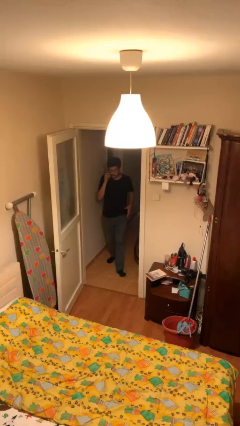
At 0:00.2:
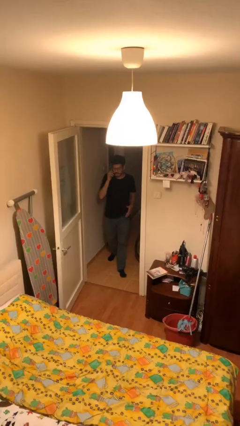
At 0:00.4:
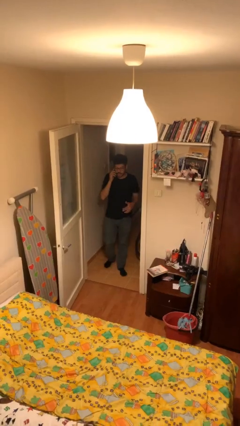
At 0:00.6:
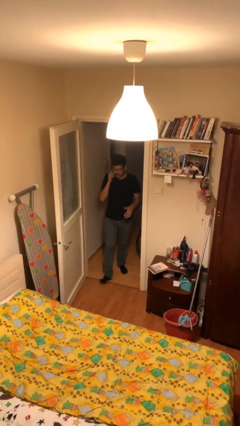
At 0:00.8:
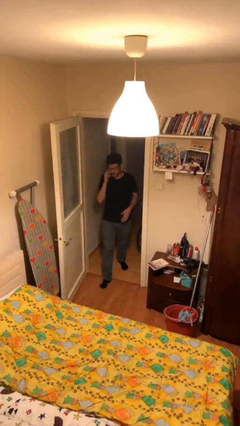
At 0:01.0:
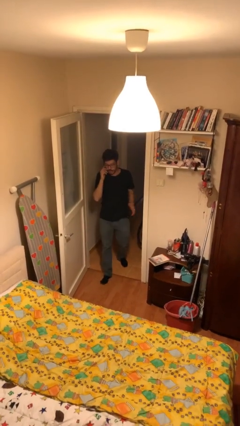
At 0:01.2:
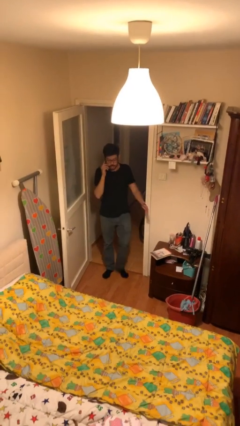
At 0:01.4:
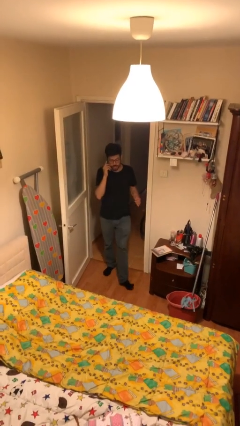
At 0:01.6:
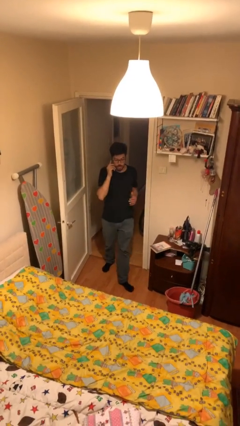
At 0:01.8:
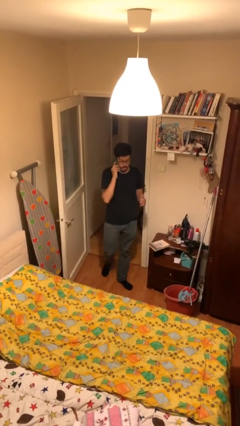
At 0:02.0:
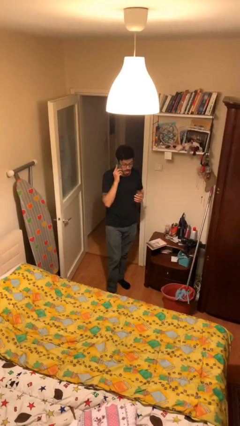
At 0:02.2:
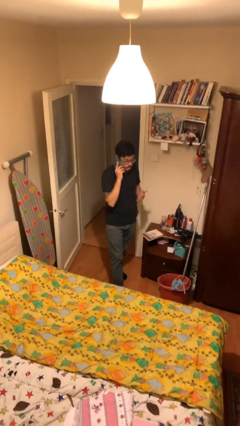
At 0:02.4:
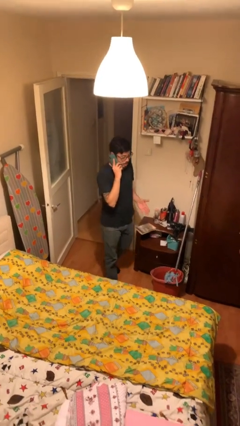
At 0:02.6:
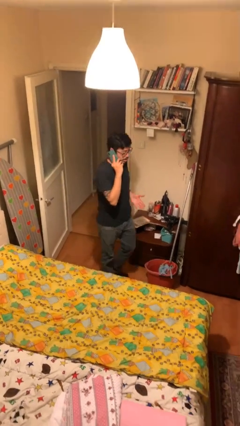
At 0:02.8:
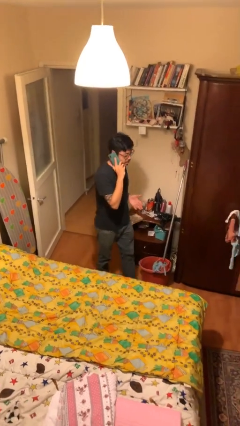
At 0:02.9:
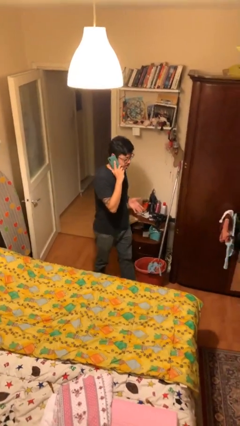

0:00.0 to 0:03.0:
person enters scene through structure

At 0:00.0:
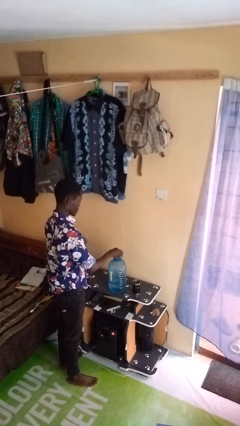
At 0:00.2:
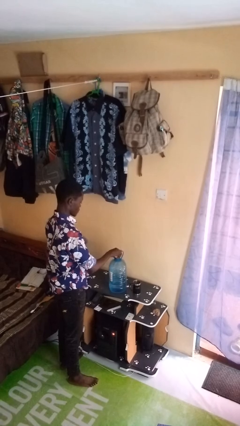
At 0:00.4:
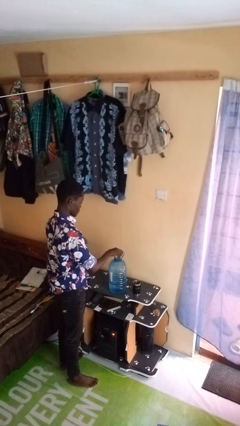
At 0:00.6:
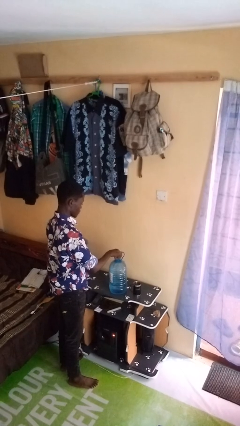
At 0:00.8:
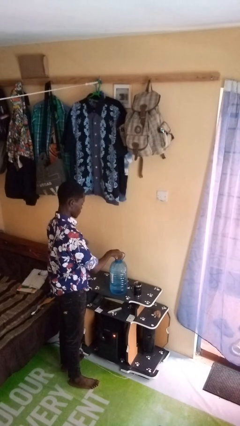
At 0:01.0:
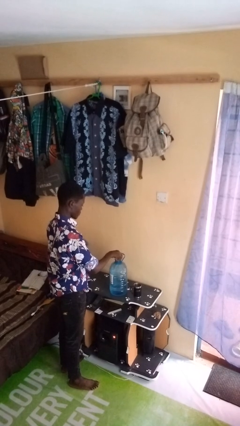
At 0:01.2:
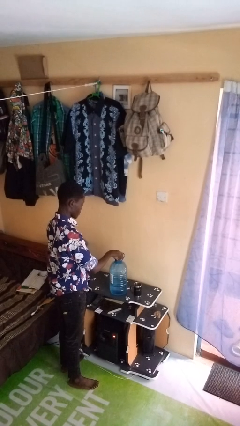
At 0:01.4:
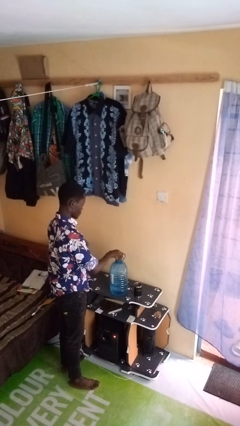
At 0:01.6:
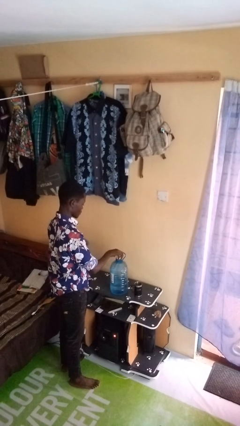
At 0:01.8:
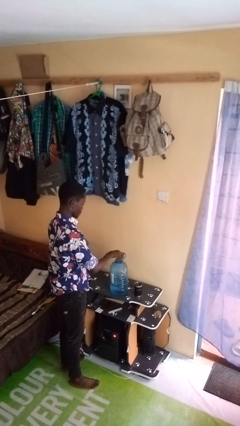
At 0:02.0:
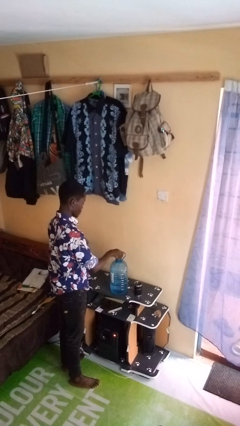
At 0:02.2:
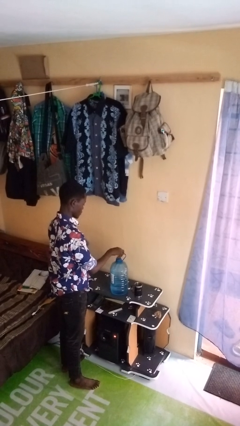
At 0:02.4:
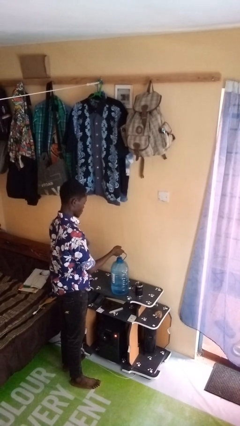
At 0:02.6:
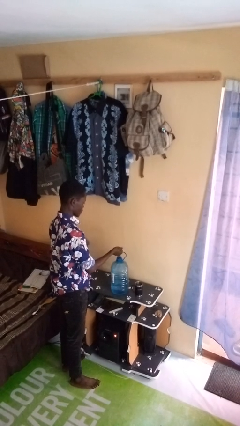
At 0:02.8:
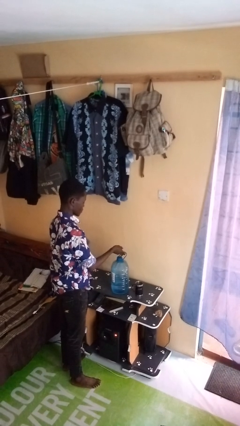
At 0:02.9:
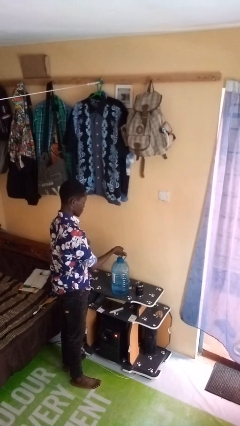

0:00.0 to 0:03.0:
person unscrews lid from bottle

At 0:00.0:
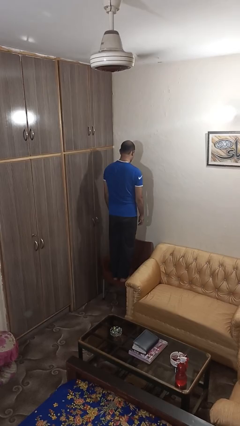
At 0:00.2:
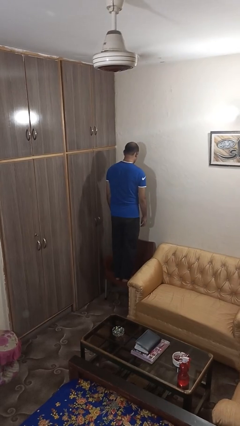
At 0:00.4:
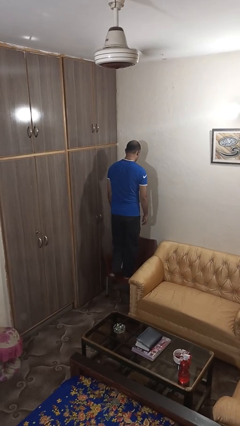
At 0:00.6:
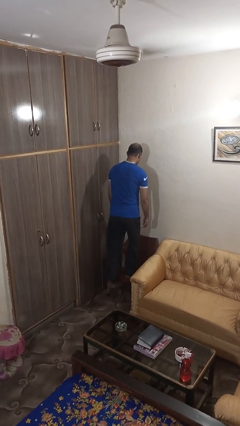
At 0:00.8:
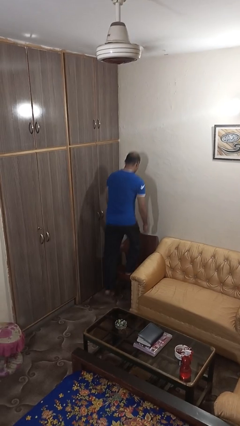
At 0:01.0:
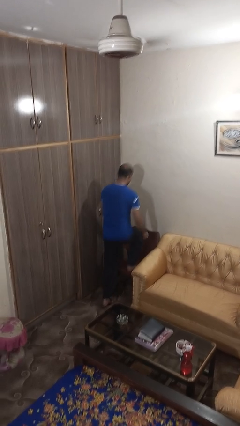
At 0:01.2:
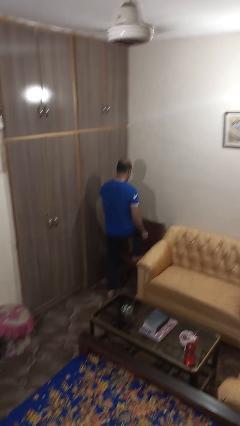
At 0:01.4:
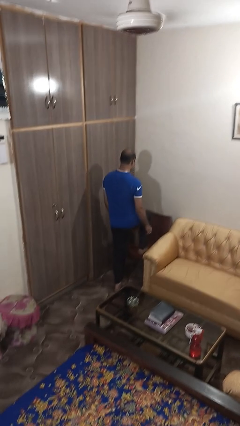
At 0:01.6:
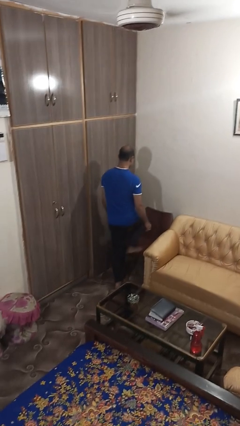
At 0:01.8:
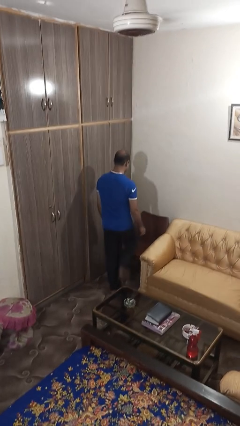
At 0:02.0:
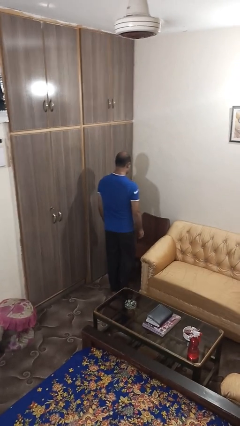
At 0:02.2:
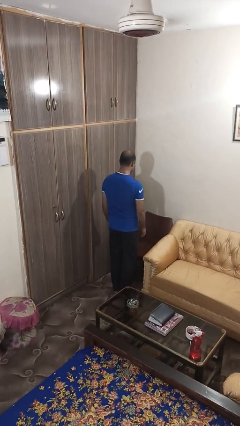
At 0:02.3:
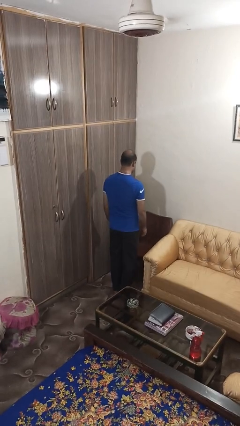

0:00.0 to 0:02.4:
person climbs off chair

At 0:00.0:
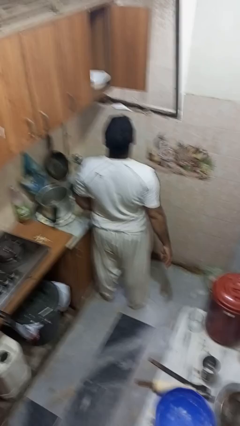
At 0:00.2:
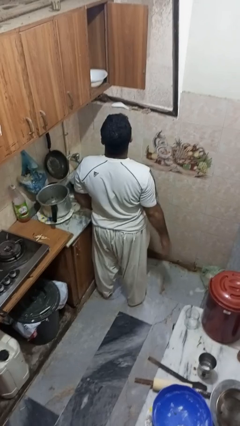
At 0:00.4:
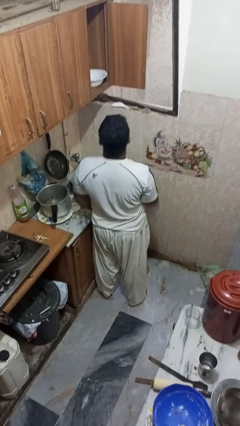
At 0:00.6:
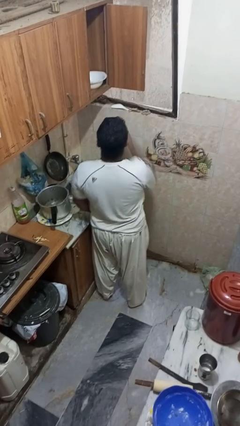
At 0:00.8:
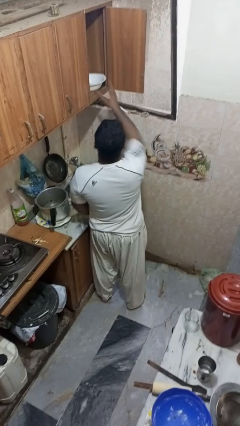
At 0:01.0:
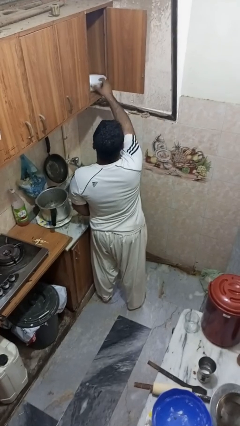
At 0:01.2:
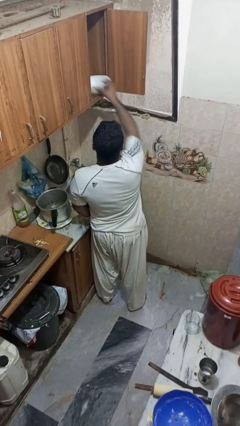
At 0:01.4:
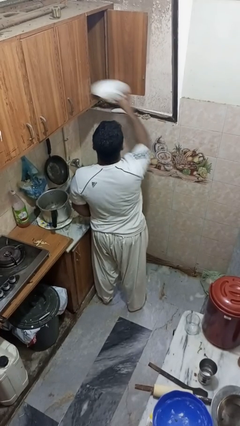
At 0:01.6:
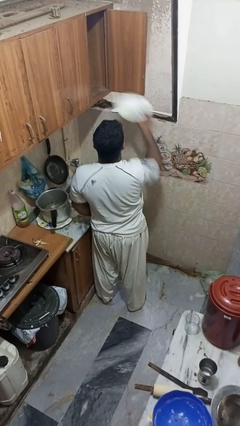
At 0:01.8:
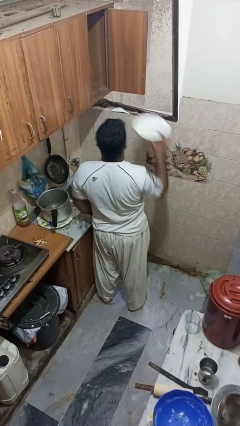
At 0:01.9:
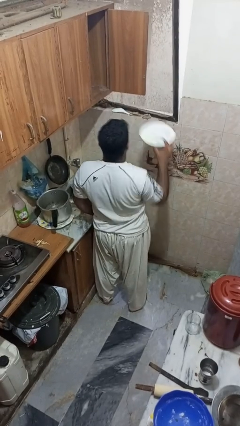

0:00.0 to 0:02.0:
person takes object from cabinet

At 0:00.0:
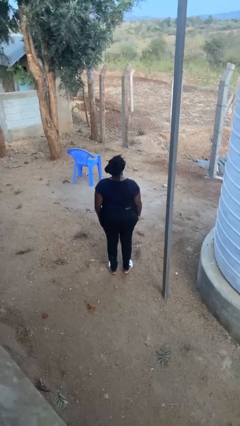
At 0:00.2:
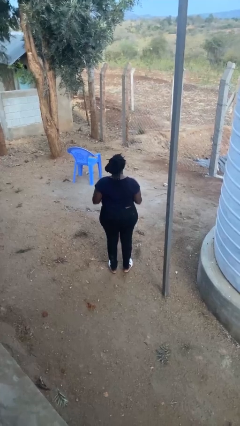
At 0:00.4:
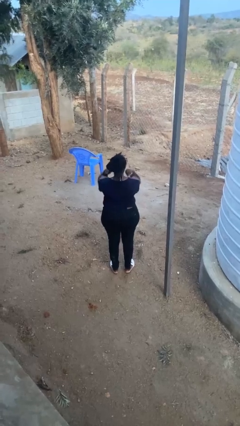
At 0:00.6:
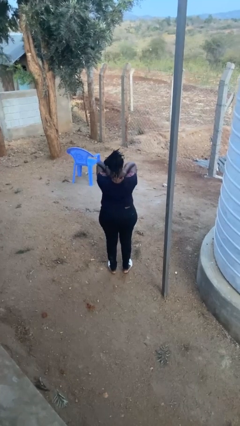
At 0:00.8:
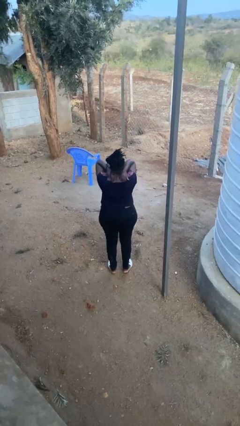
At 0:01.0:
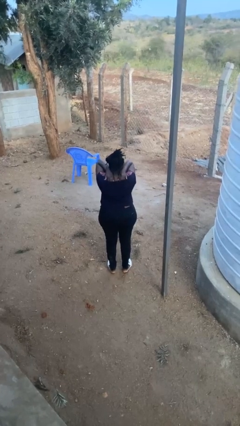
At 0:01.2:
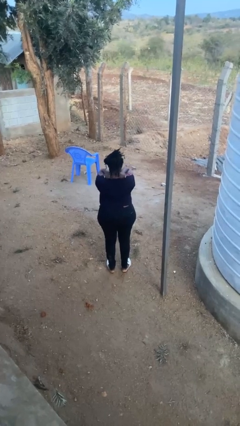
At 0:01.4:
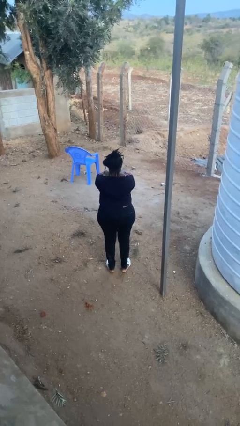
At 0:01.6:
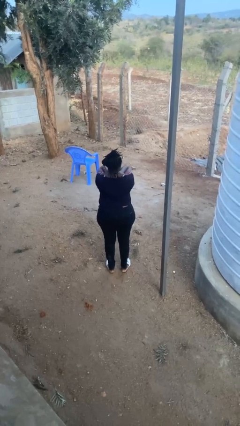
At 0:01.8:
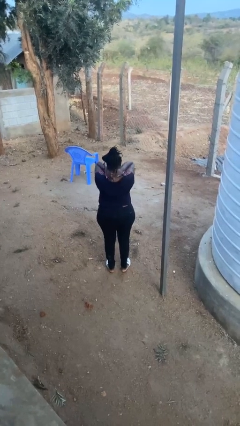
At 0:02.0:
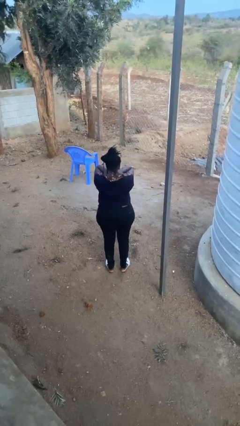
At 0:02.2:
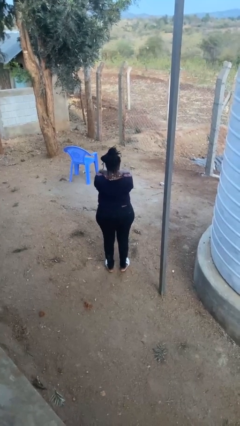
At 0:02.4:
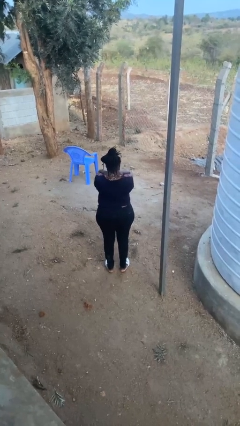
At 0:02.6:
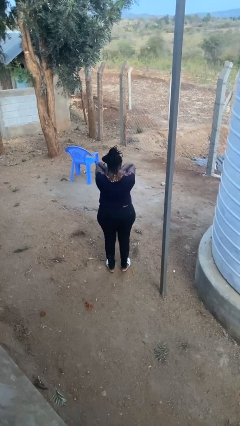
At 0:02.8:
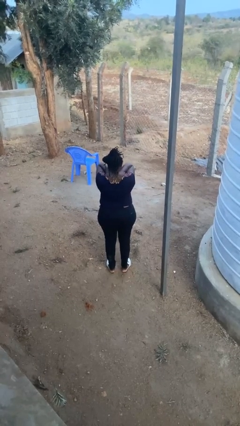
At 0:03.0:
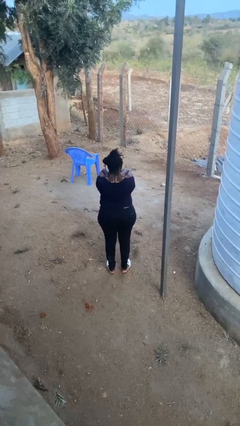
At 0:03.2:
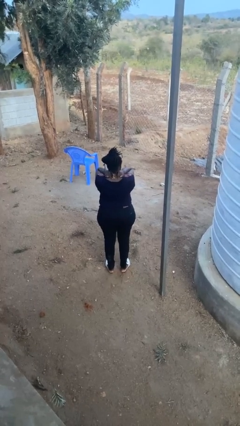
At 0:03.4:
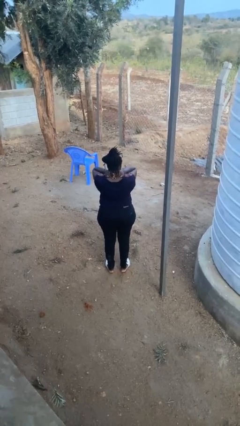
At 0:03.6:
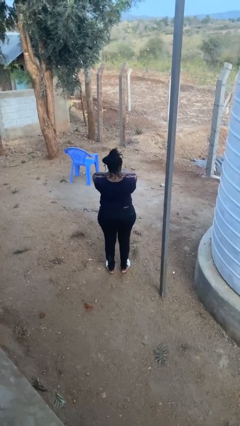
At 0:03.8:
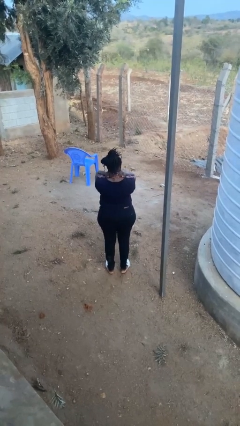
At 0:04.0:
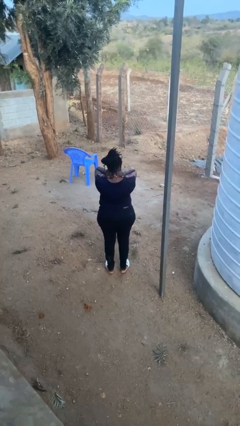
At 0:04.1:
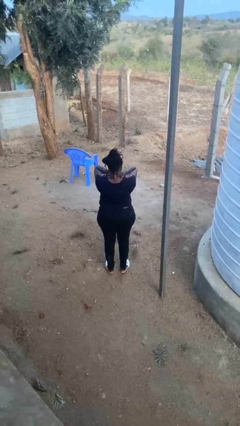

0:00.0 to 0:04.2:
person rubs neck

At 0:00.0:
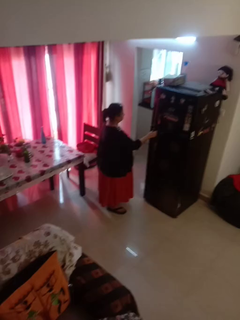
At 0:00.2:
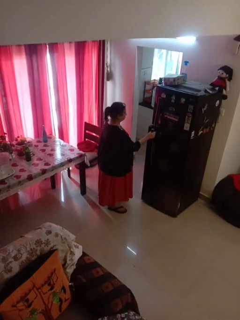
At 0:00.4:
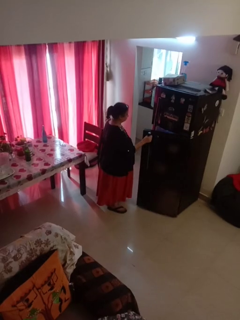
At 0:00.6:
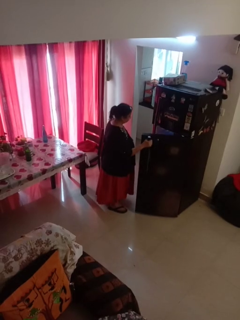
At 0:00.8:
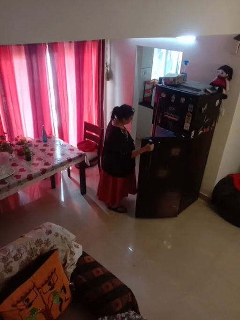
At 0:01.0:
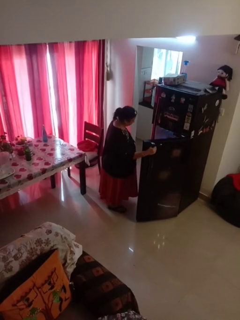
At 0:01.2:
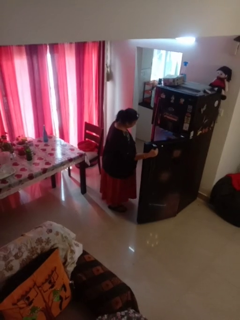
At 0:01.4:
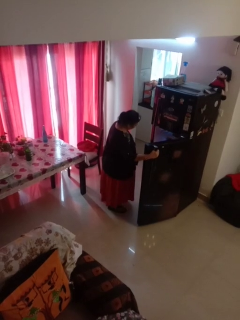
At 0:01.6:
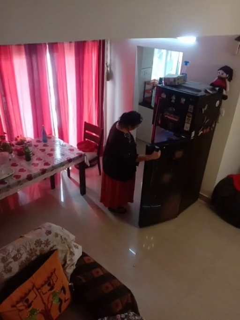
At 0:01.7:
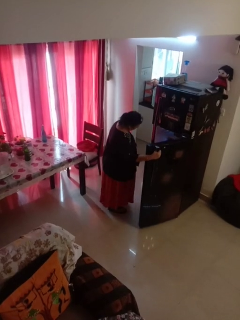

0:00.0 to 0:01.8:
person opens refrigerator

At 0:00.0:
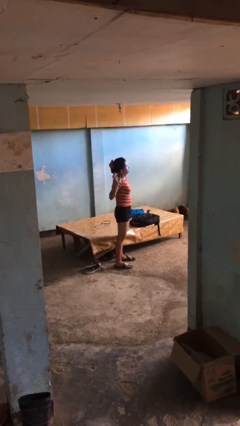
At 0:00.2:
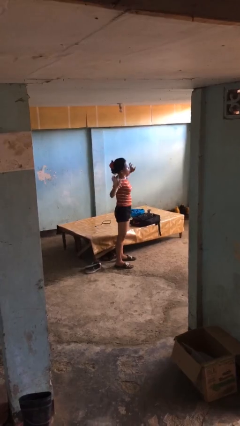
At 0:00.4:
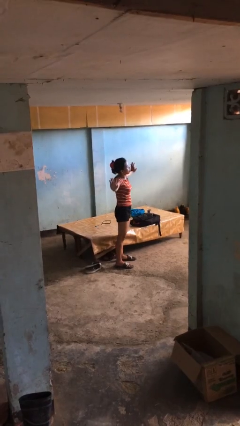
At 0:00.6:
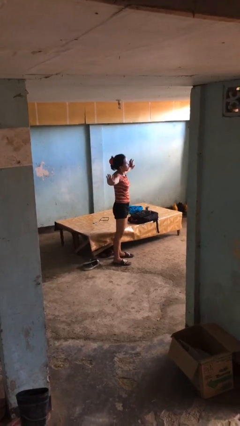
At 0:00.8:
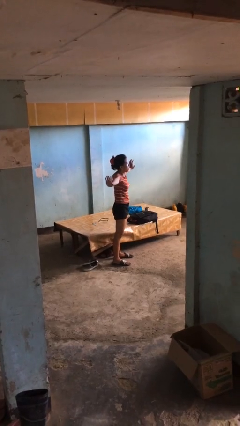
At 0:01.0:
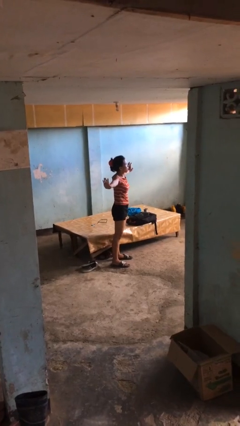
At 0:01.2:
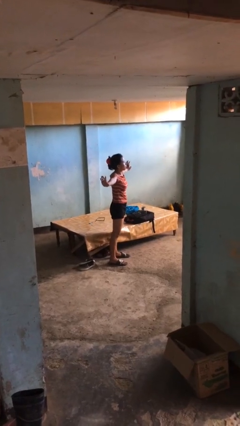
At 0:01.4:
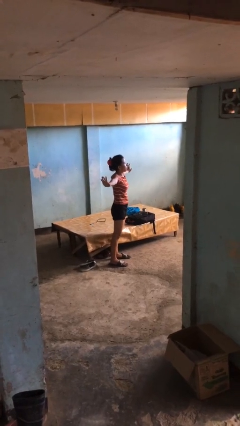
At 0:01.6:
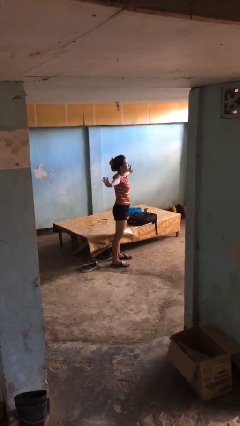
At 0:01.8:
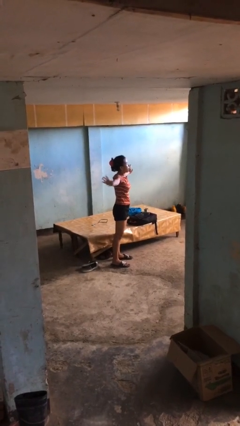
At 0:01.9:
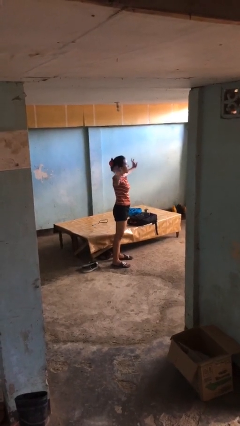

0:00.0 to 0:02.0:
person stretches arms to side
